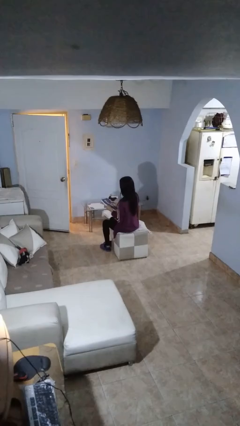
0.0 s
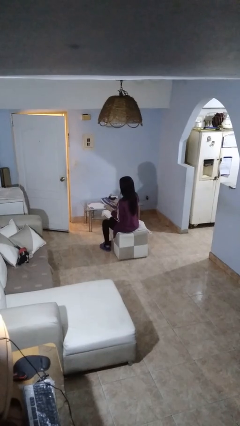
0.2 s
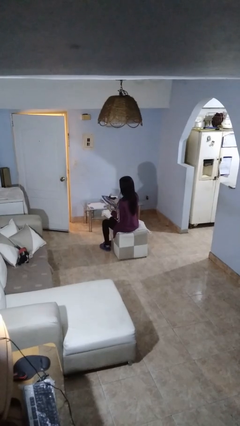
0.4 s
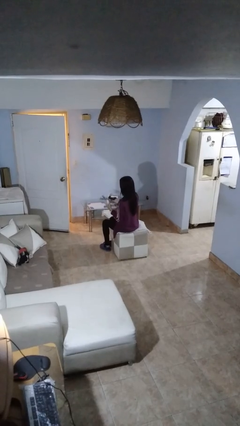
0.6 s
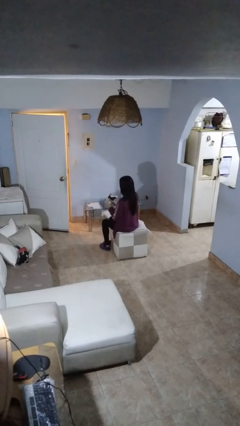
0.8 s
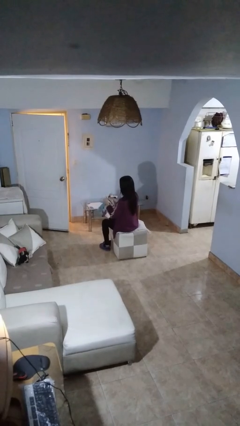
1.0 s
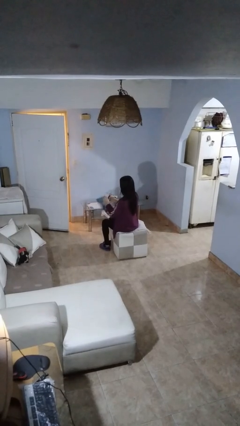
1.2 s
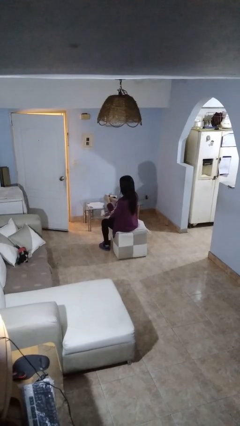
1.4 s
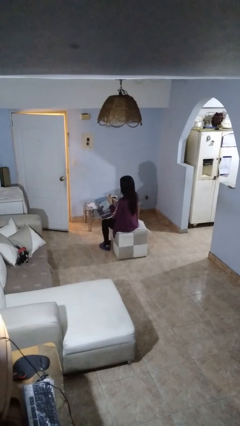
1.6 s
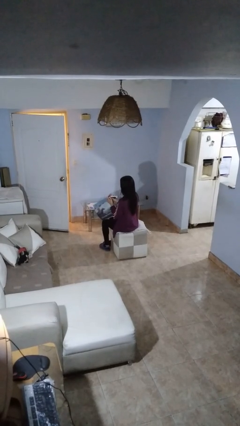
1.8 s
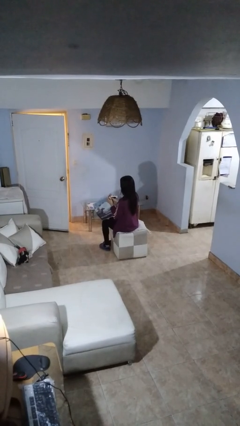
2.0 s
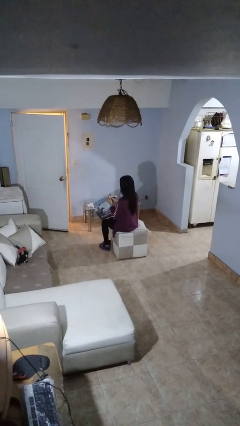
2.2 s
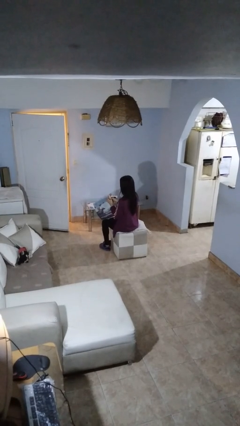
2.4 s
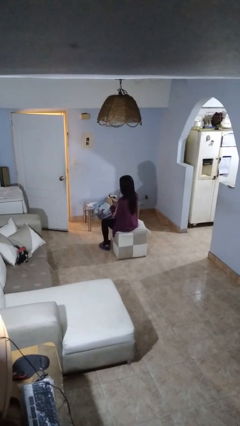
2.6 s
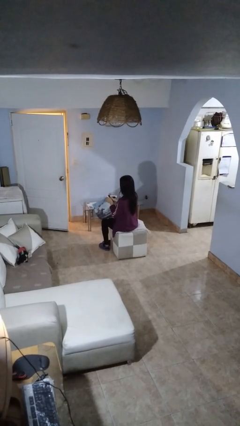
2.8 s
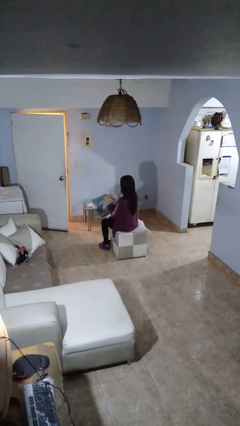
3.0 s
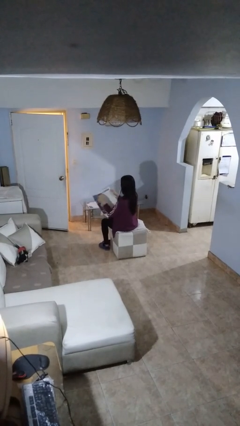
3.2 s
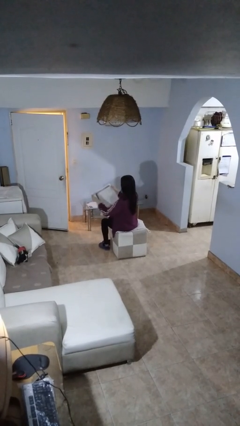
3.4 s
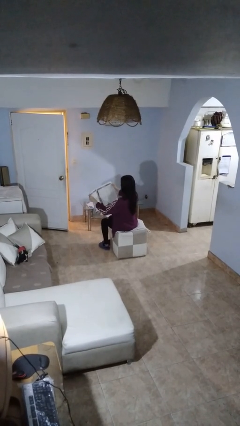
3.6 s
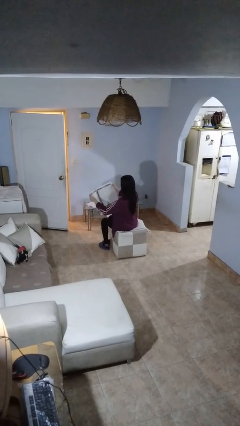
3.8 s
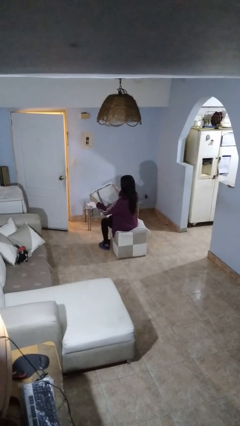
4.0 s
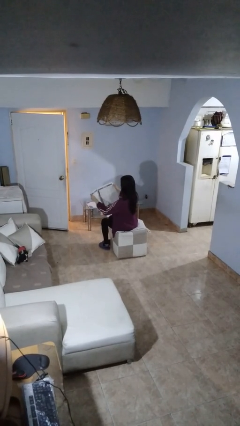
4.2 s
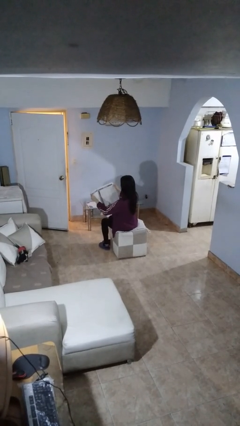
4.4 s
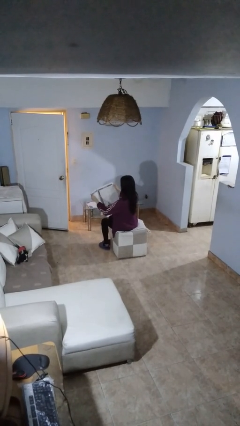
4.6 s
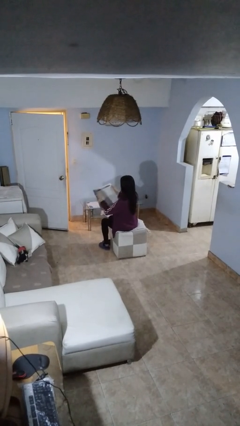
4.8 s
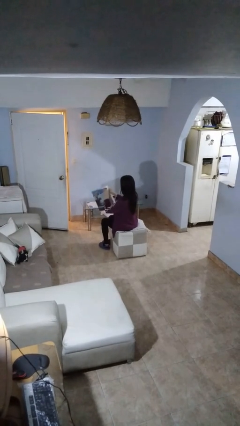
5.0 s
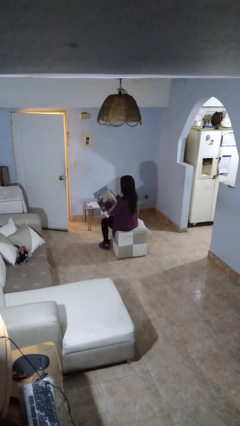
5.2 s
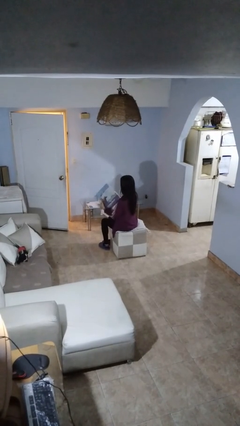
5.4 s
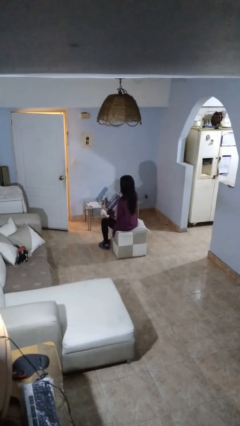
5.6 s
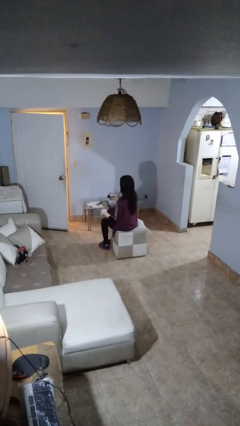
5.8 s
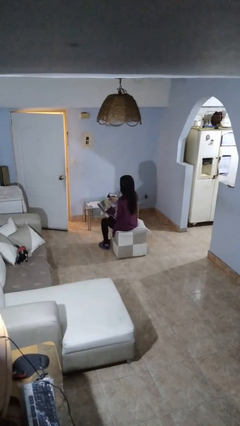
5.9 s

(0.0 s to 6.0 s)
person reads newspaper

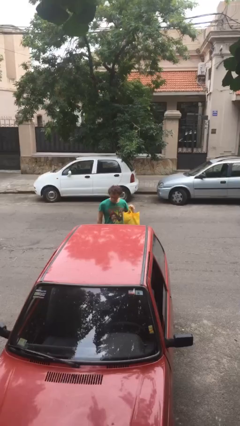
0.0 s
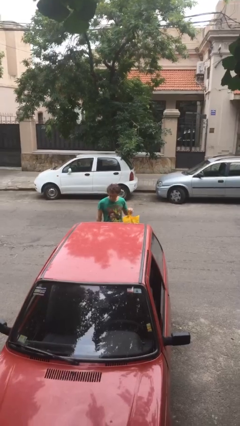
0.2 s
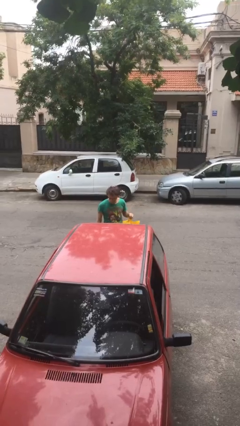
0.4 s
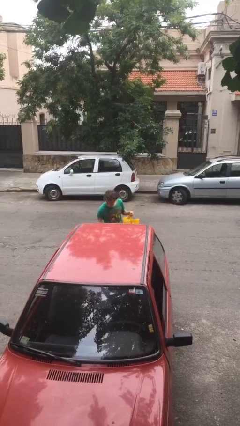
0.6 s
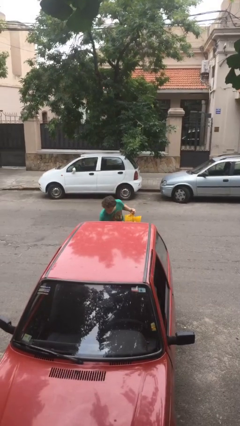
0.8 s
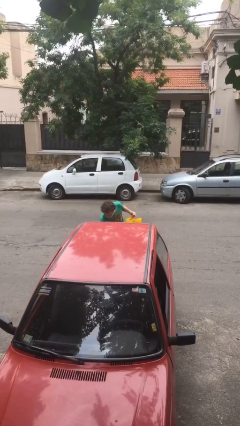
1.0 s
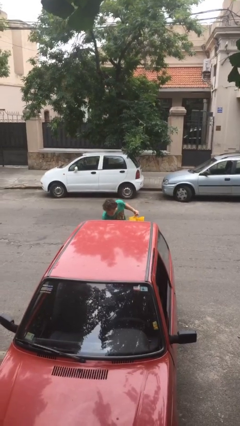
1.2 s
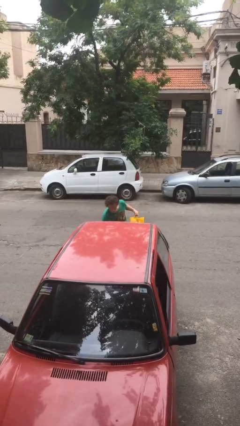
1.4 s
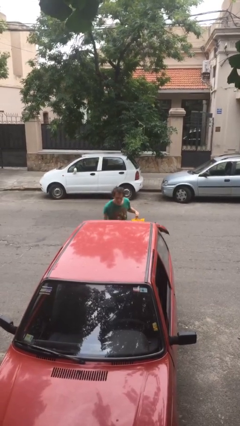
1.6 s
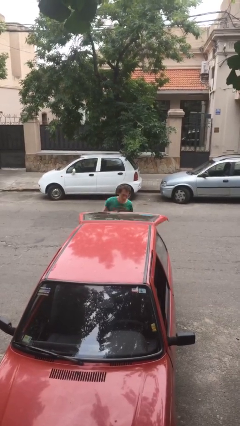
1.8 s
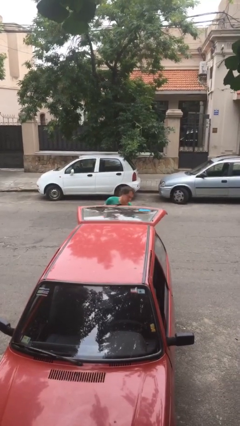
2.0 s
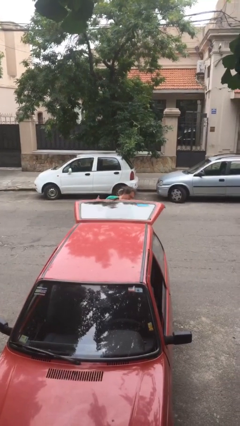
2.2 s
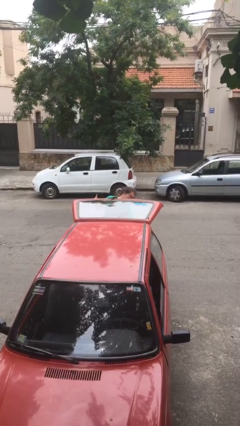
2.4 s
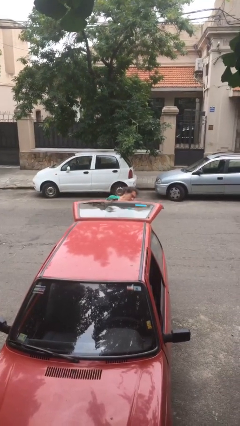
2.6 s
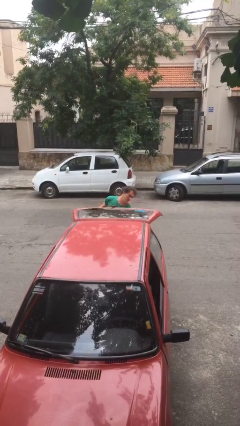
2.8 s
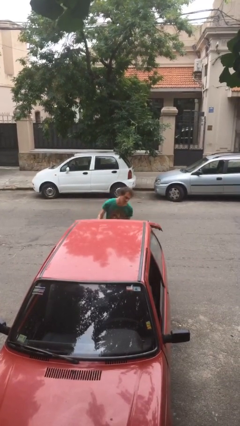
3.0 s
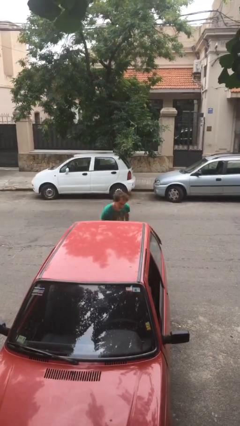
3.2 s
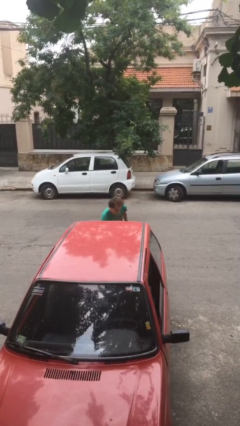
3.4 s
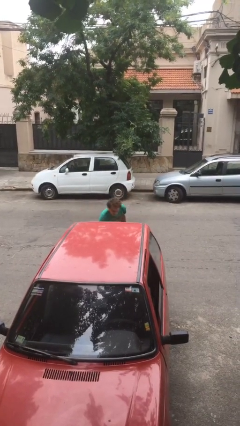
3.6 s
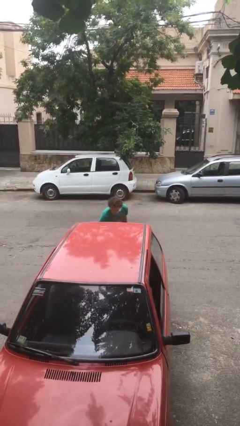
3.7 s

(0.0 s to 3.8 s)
person loads car

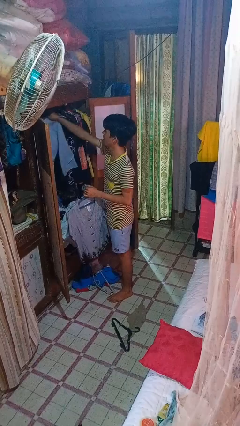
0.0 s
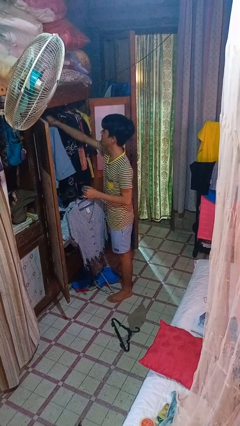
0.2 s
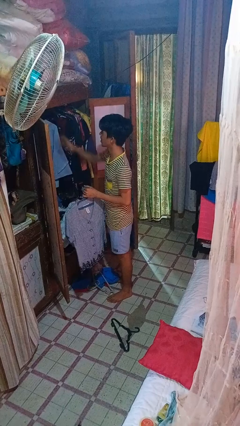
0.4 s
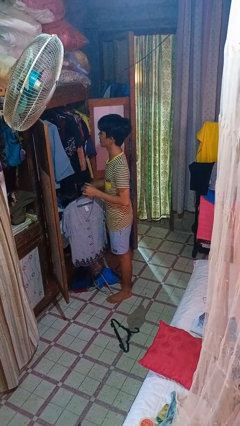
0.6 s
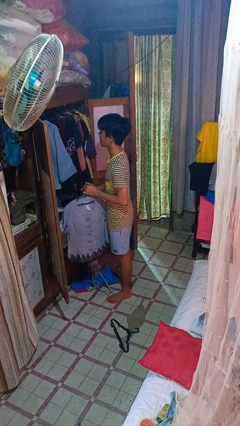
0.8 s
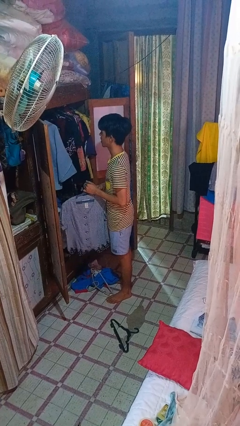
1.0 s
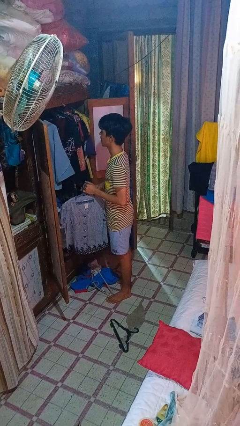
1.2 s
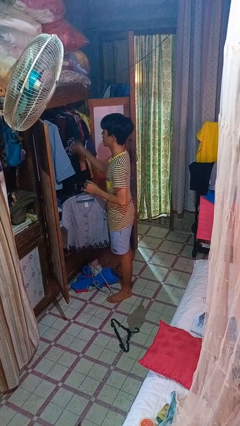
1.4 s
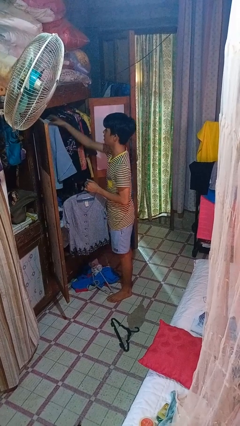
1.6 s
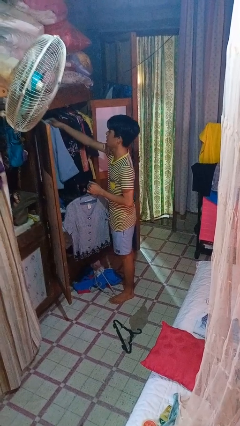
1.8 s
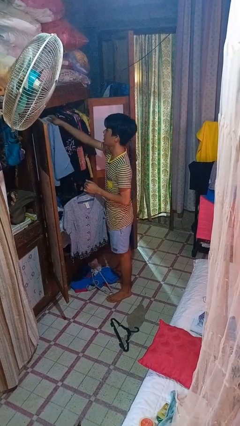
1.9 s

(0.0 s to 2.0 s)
person puts clothes into closet

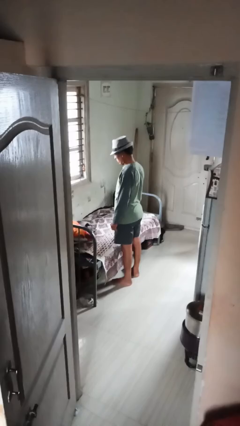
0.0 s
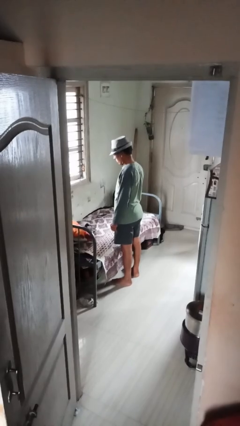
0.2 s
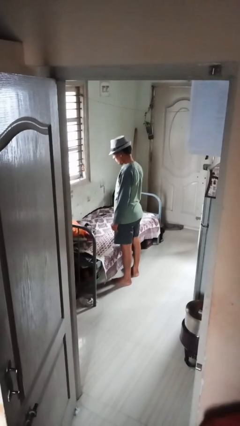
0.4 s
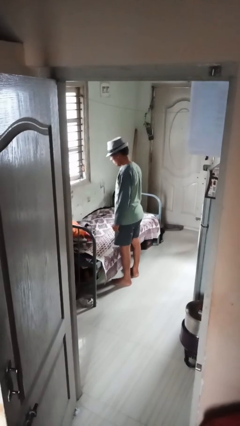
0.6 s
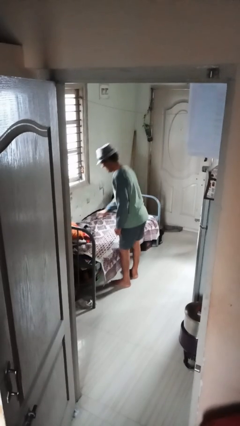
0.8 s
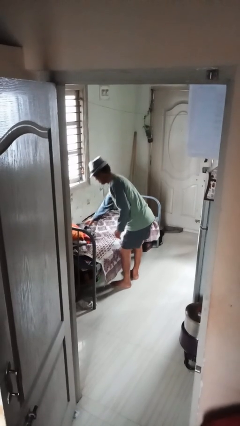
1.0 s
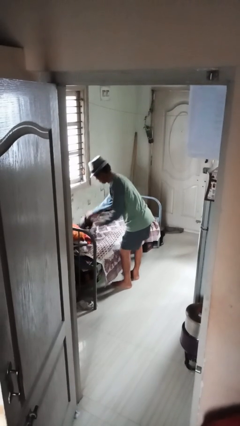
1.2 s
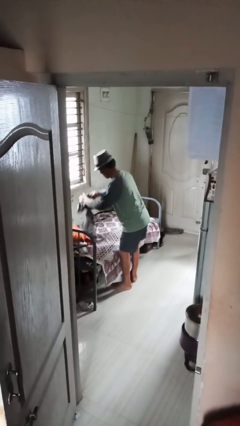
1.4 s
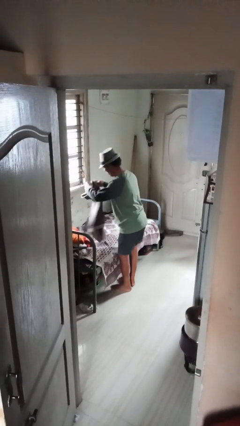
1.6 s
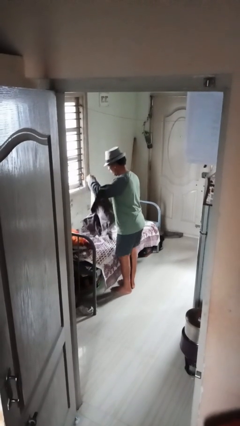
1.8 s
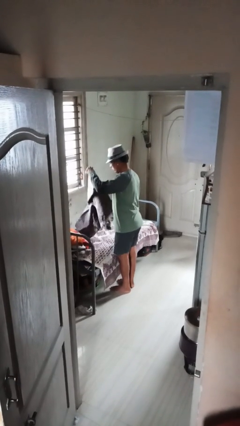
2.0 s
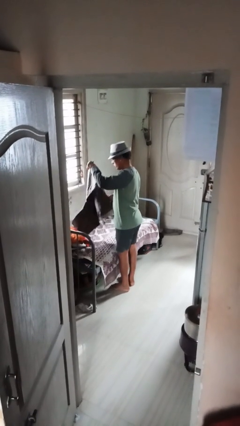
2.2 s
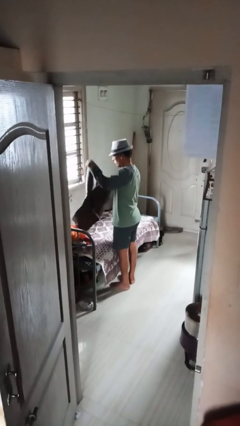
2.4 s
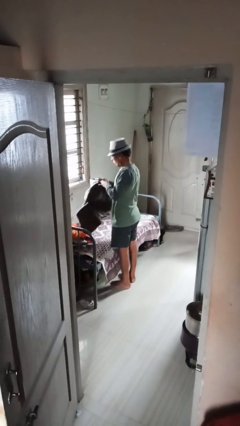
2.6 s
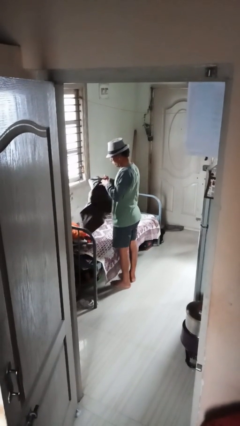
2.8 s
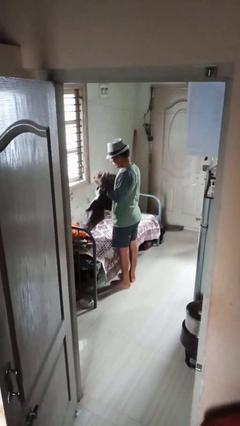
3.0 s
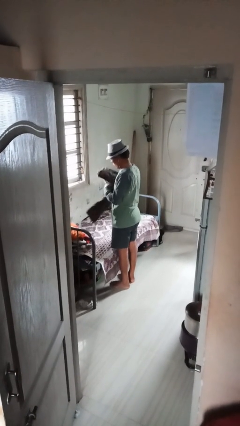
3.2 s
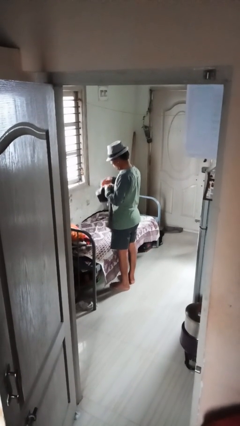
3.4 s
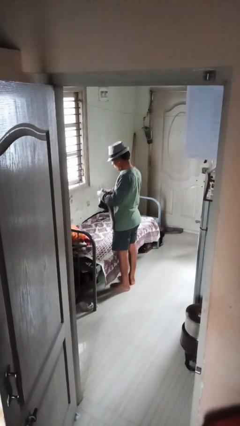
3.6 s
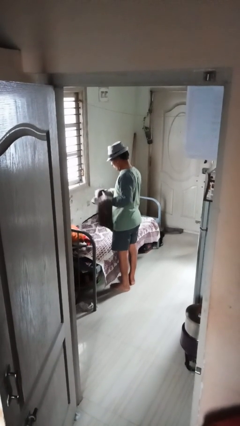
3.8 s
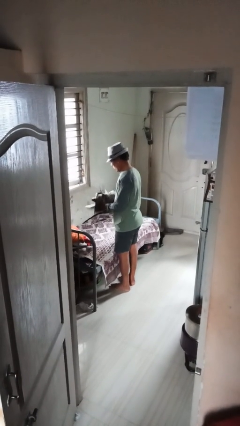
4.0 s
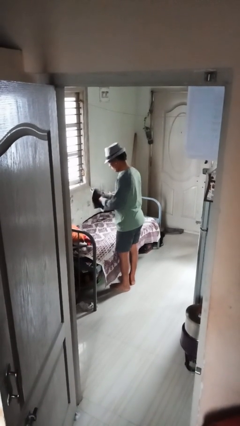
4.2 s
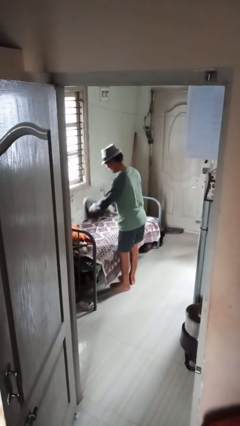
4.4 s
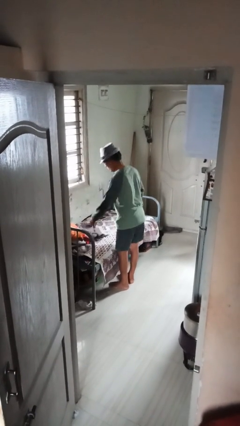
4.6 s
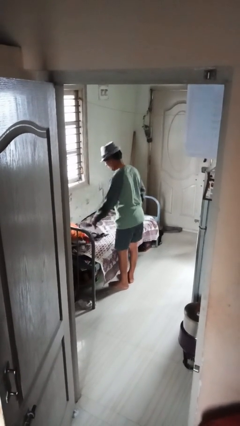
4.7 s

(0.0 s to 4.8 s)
person folds pants

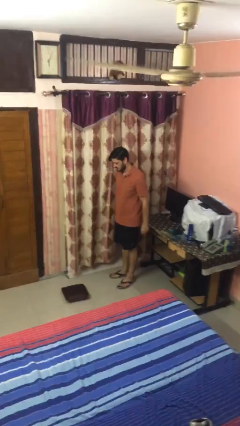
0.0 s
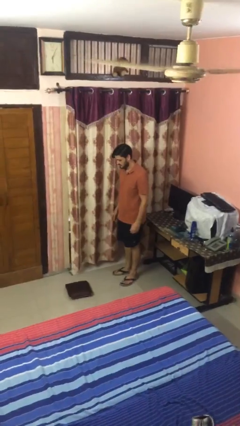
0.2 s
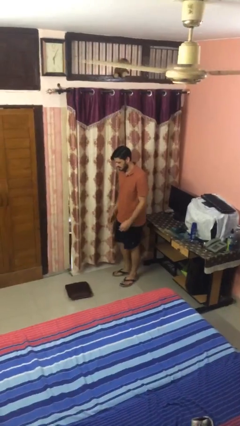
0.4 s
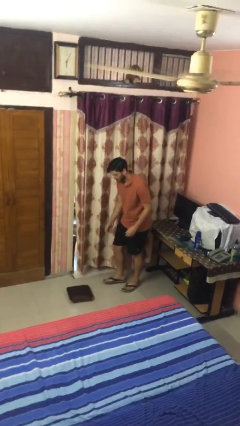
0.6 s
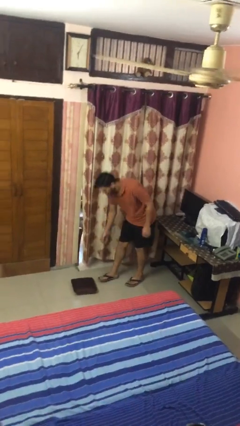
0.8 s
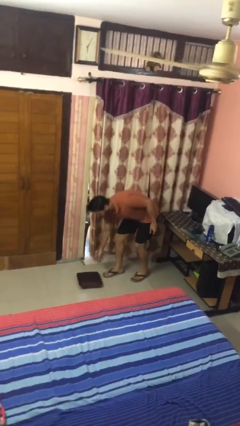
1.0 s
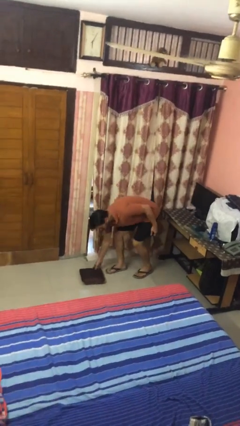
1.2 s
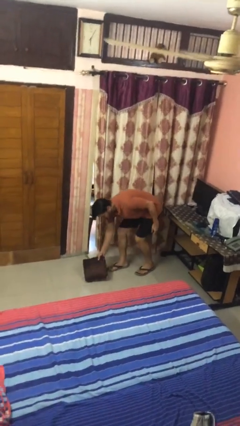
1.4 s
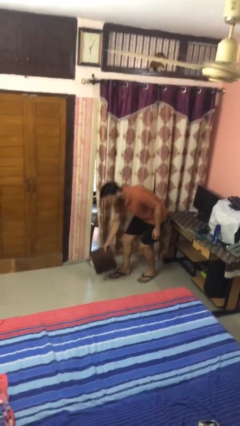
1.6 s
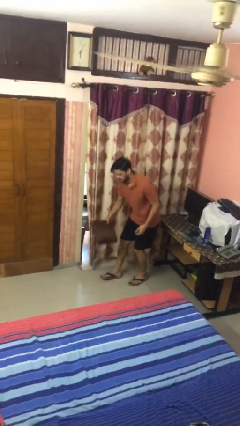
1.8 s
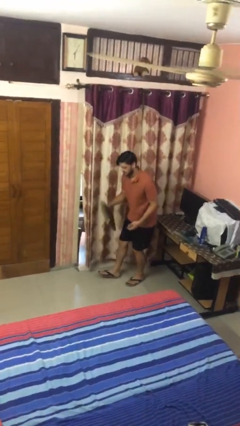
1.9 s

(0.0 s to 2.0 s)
person picks up object from floor
